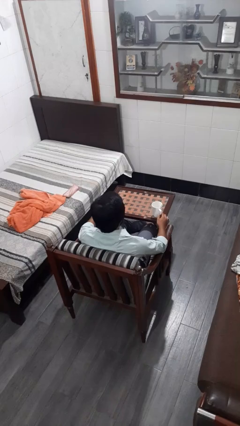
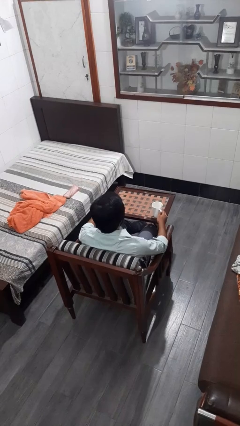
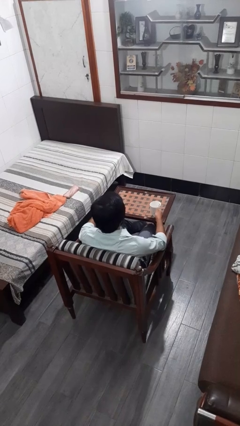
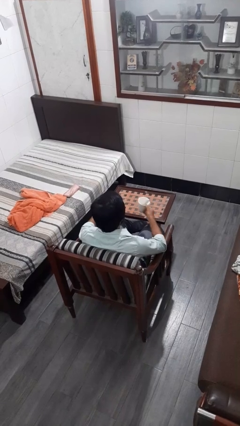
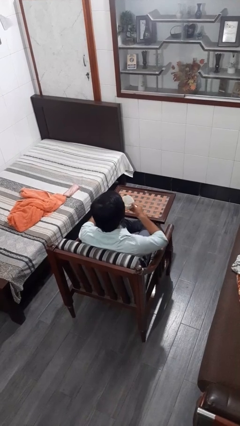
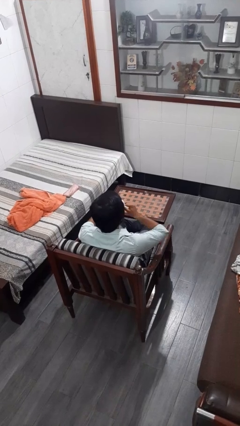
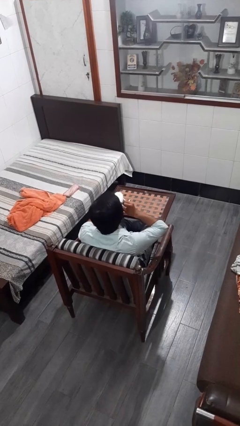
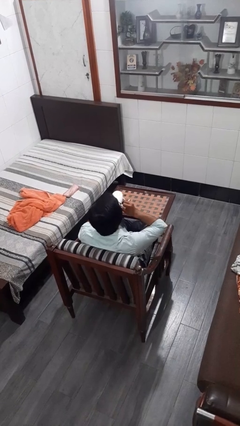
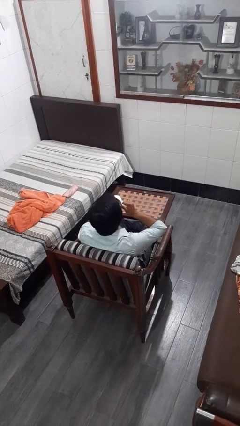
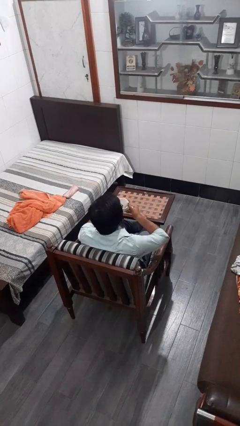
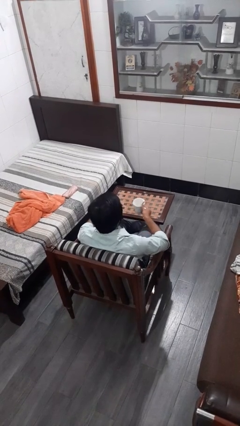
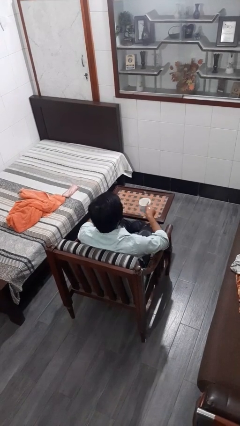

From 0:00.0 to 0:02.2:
person drinks from mug

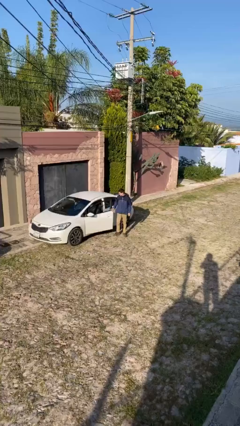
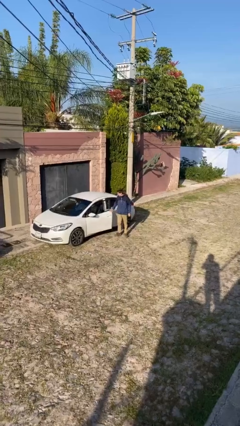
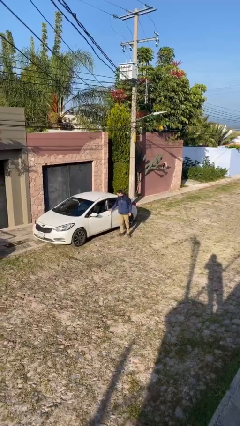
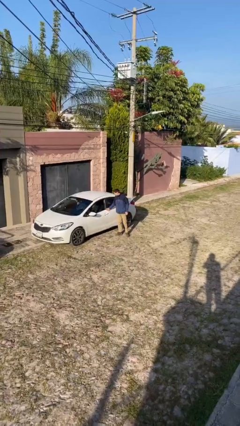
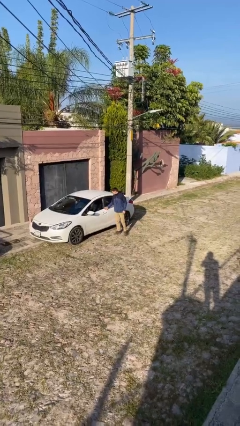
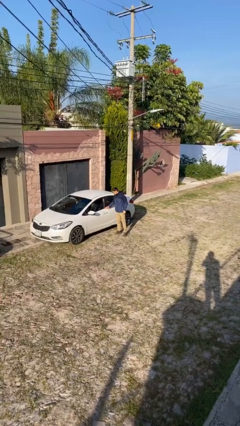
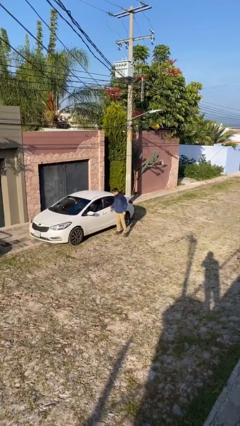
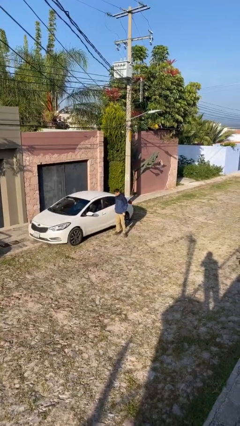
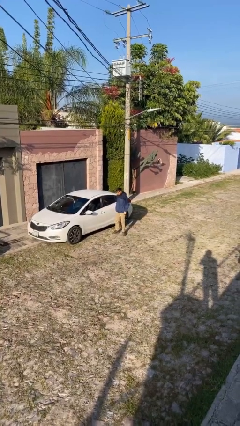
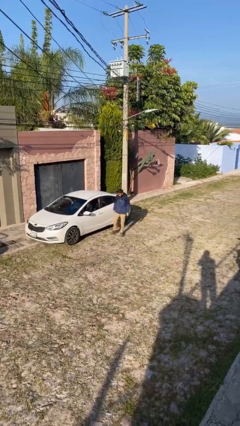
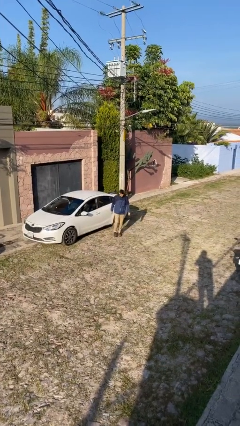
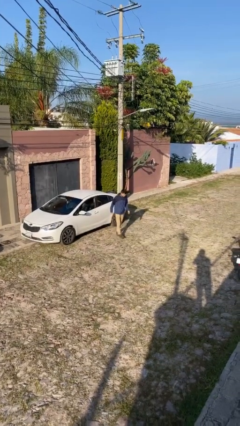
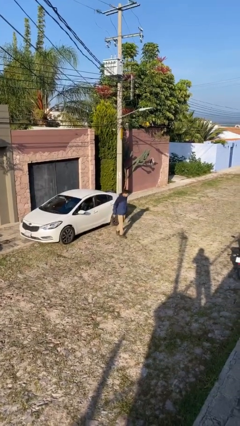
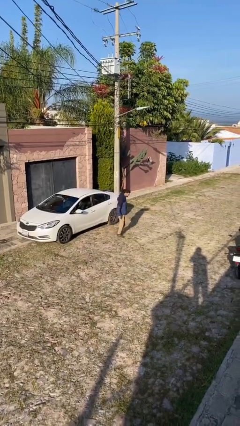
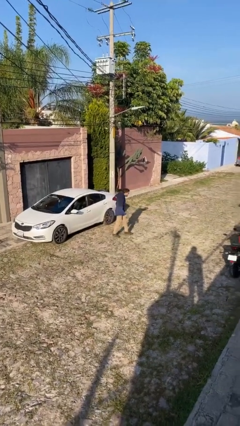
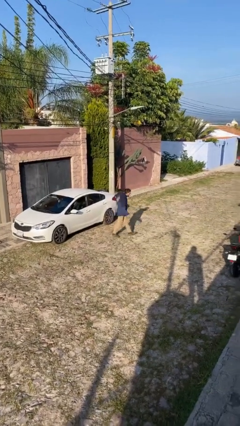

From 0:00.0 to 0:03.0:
person closes car door

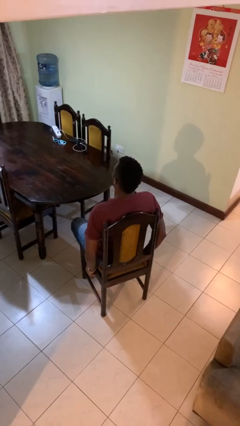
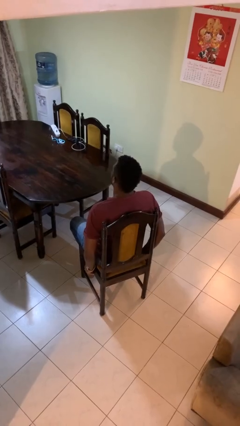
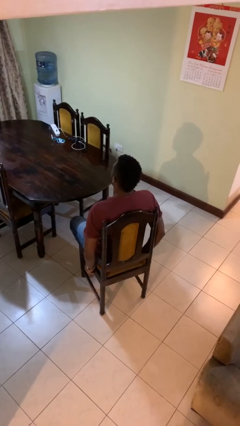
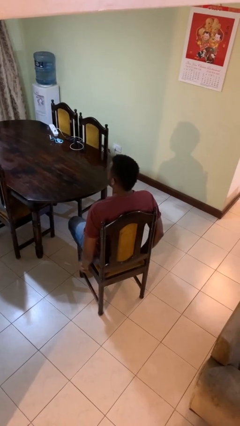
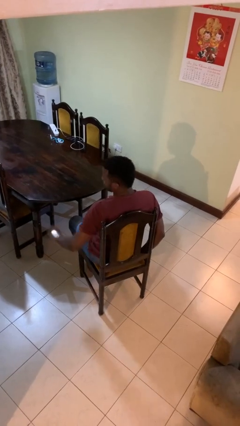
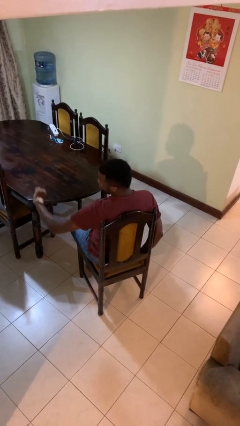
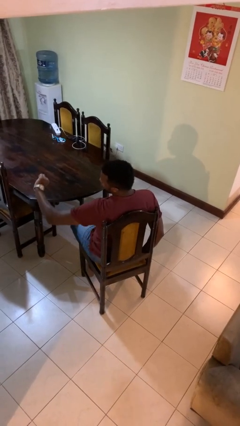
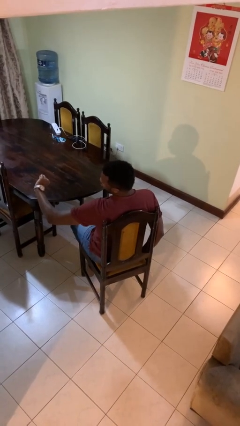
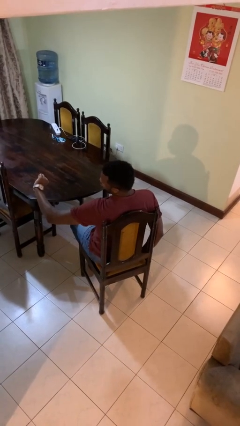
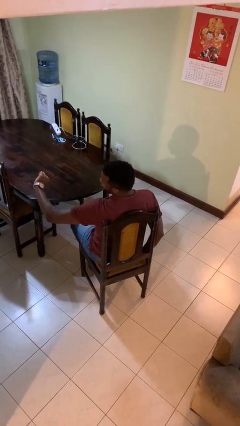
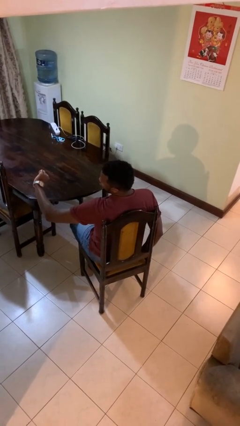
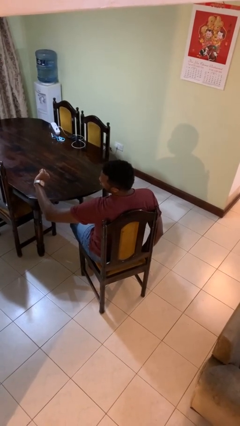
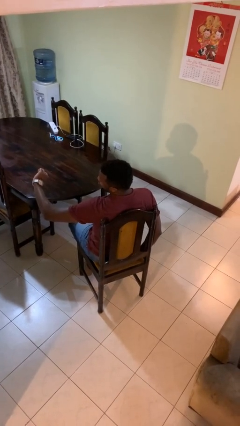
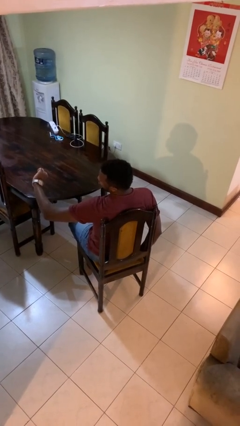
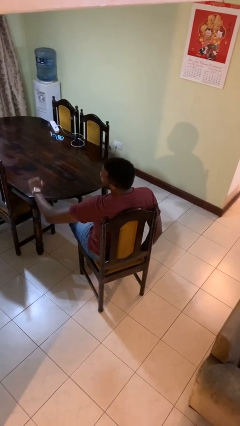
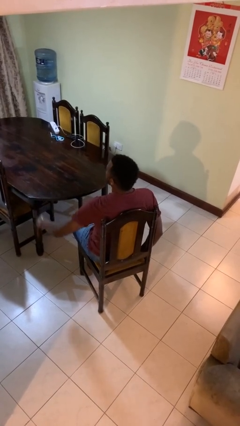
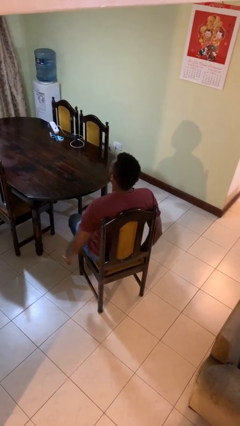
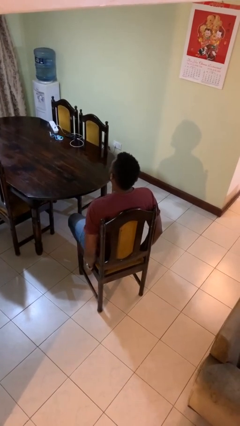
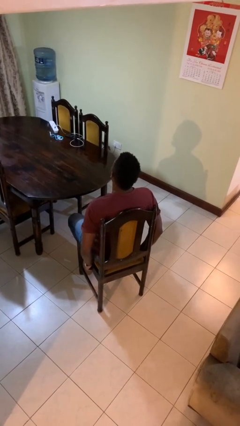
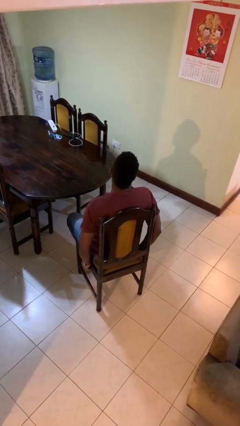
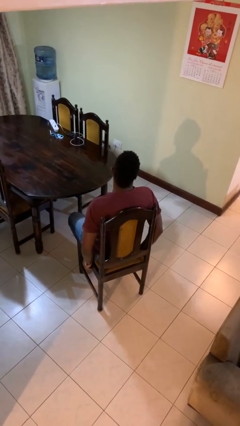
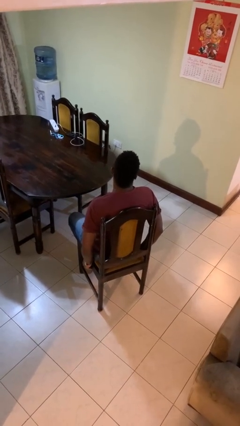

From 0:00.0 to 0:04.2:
person looks at wristwatch

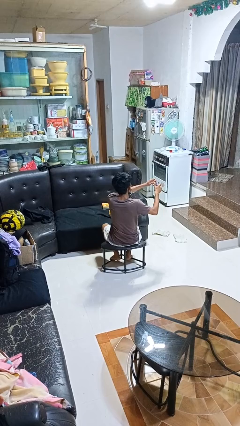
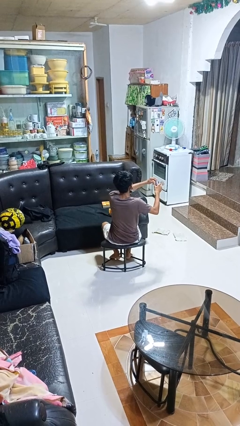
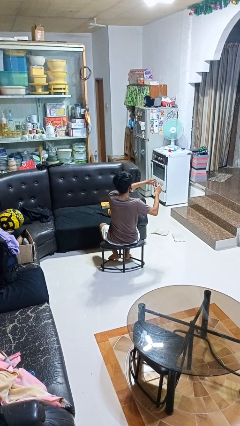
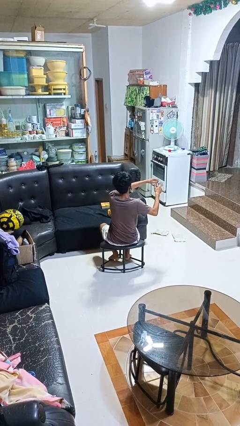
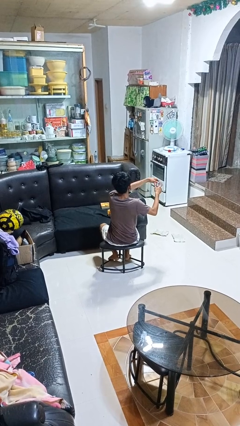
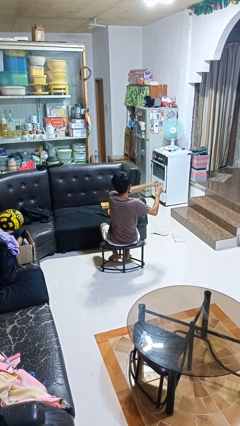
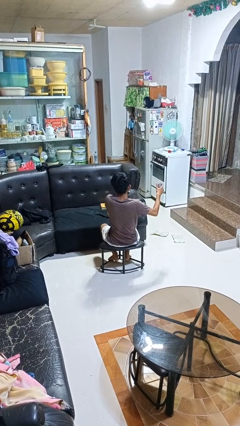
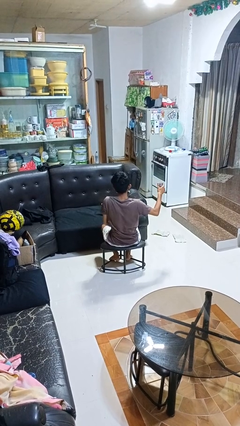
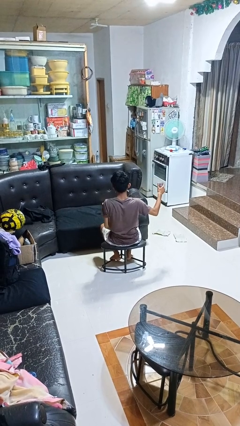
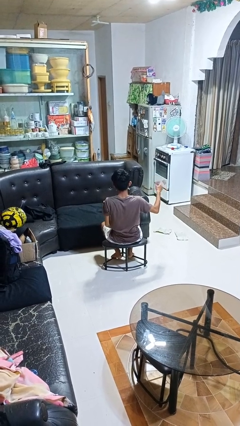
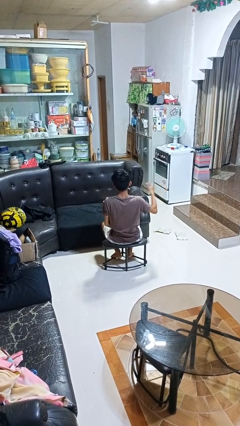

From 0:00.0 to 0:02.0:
person opens beverage can

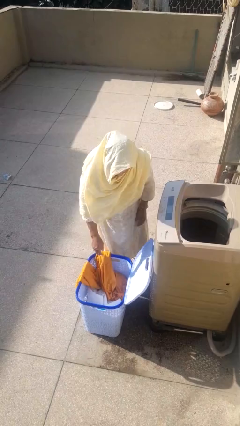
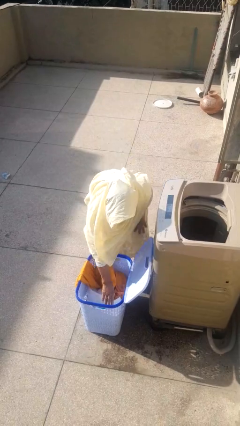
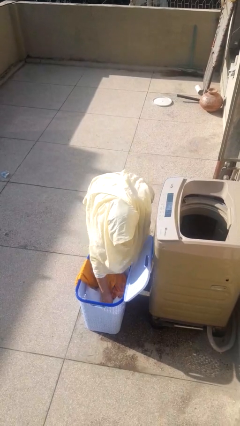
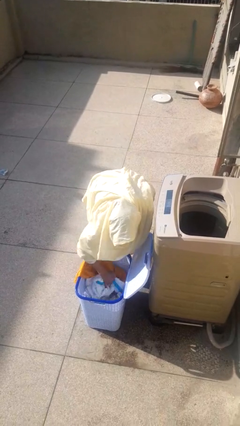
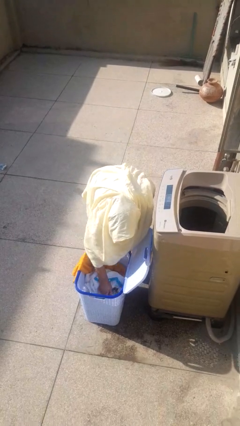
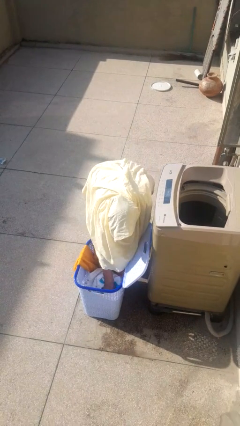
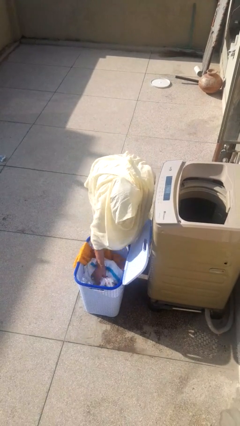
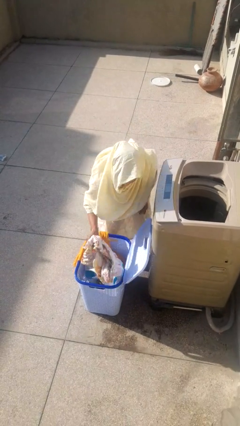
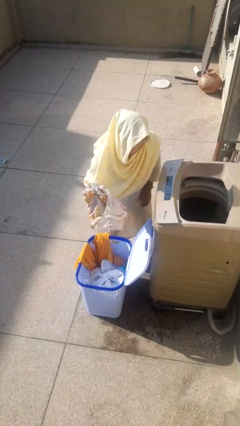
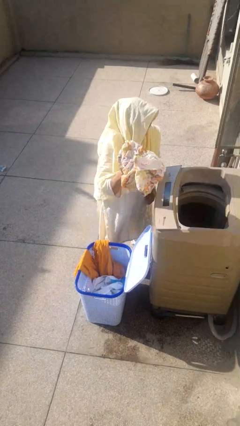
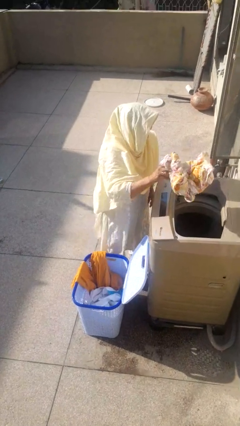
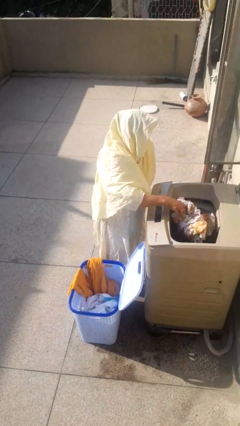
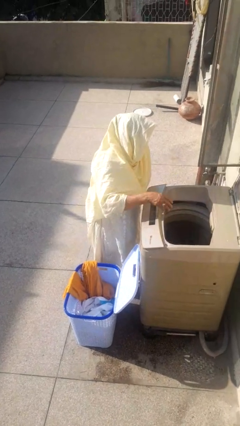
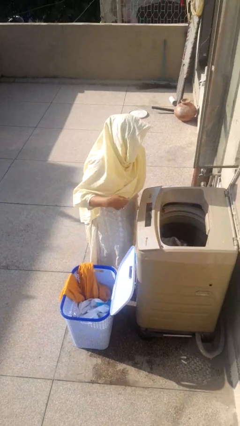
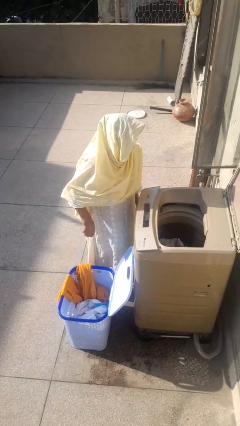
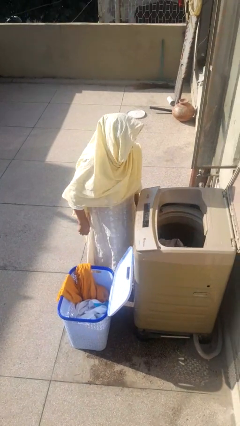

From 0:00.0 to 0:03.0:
person loads clotheswasher

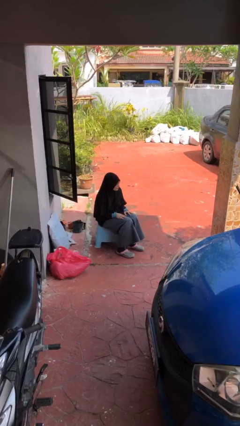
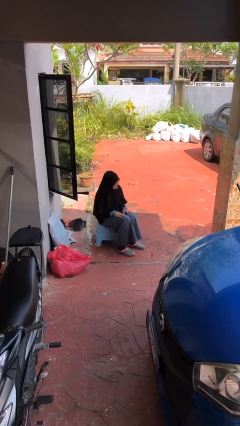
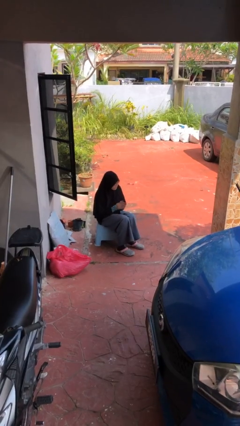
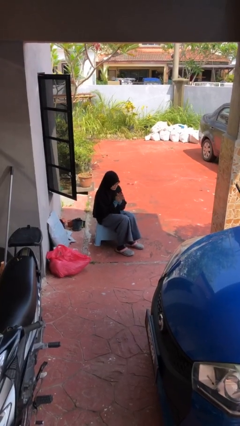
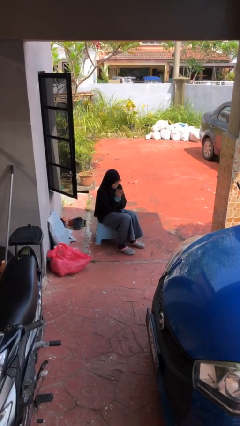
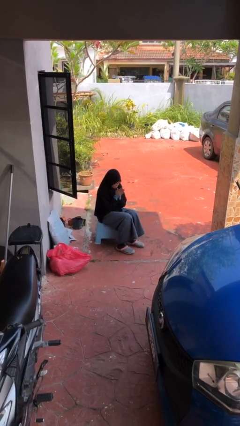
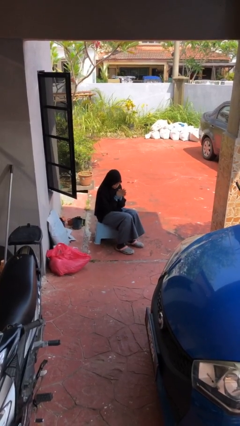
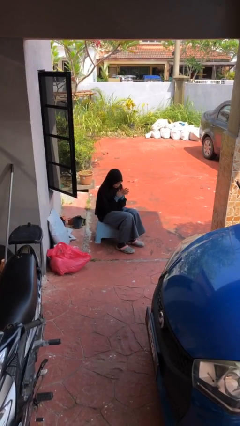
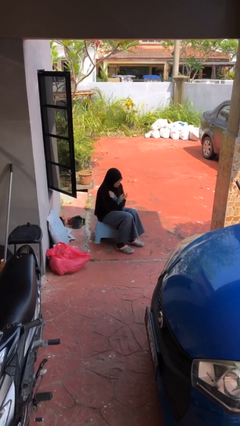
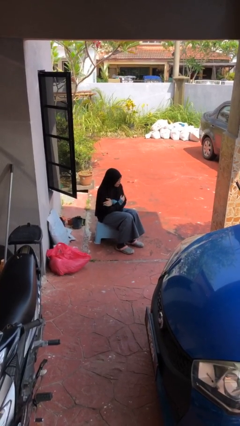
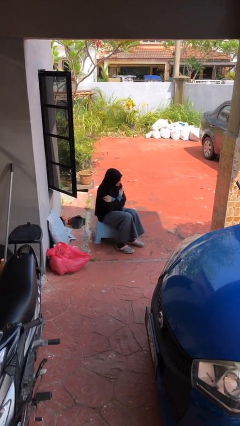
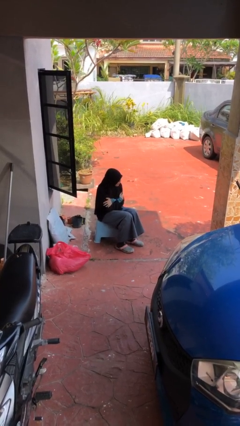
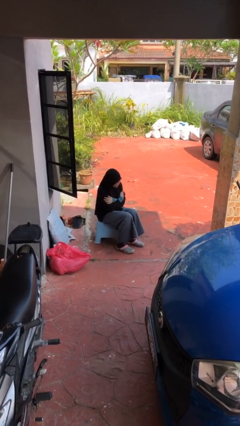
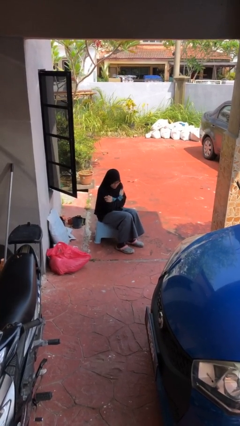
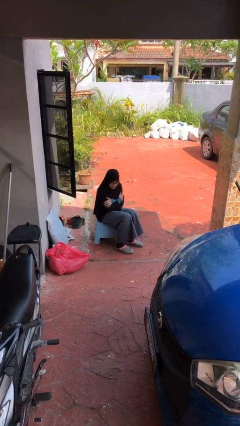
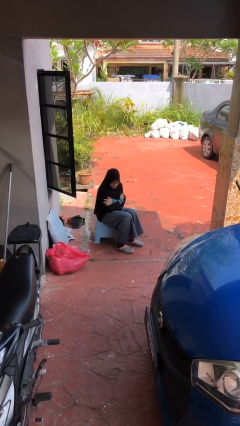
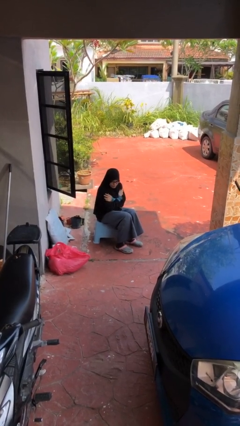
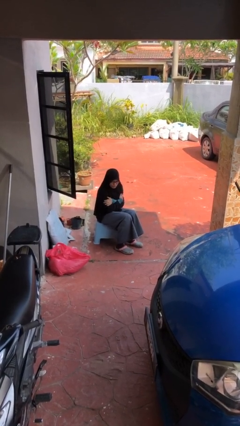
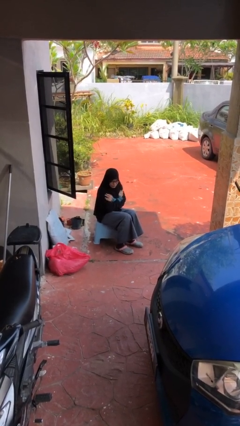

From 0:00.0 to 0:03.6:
person blows into hands
